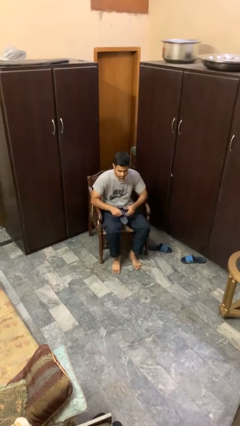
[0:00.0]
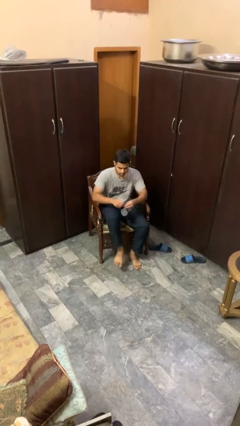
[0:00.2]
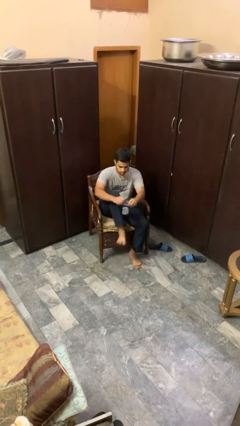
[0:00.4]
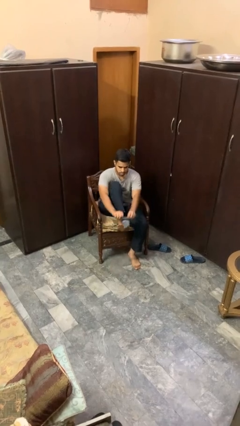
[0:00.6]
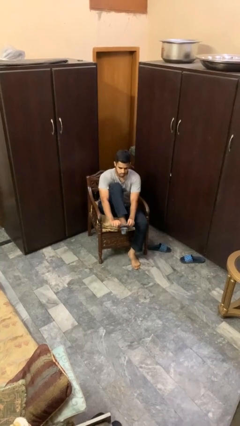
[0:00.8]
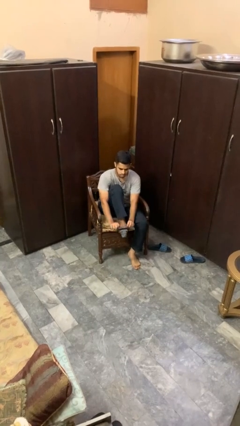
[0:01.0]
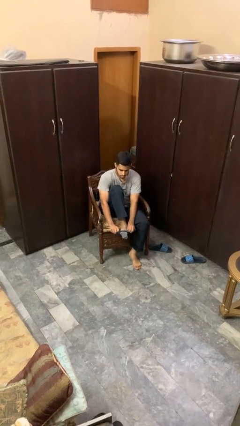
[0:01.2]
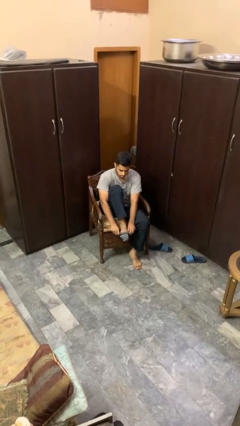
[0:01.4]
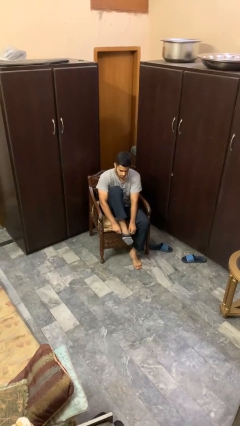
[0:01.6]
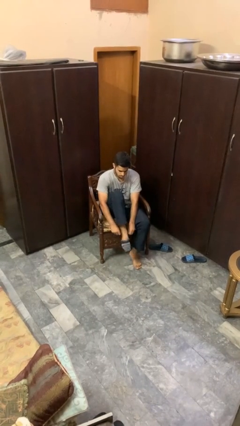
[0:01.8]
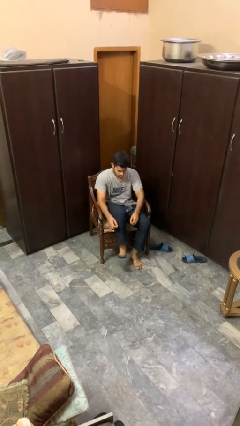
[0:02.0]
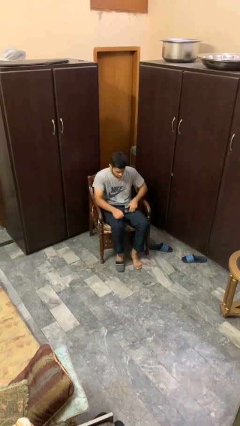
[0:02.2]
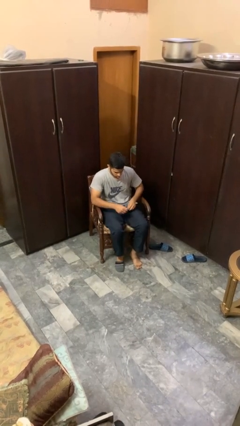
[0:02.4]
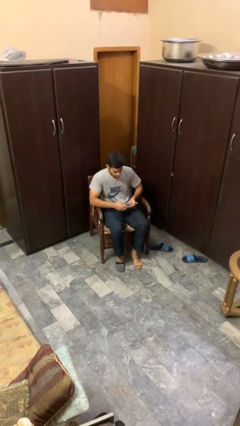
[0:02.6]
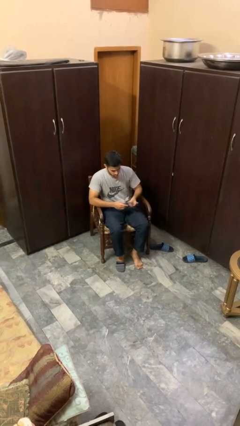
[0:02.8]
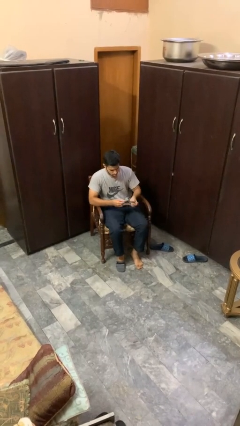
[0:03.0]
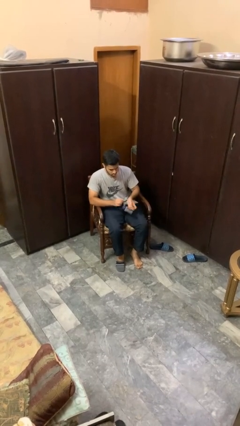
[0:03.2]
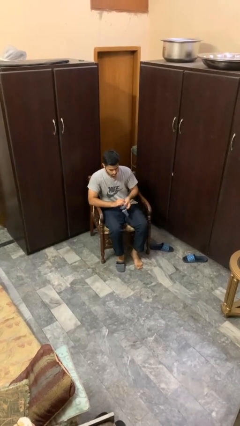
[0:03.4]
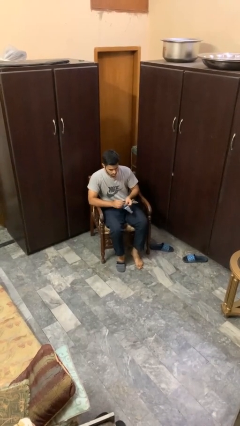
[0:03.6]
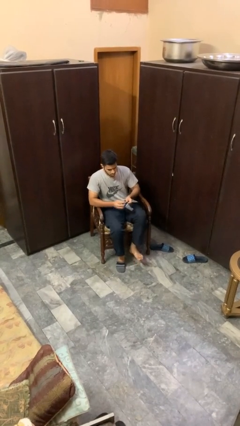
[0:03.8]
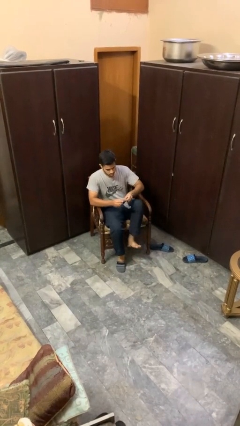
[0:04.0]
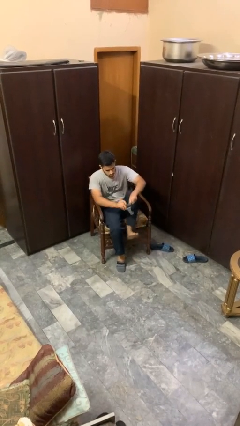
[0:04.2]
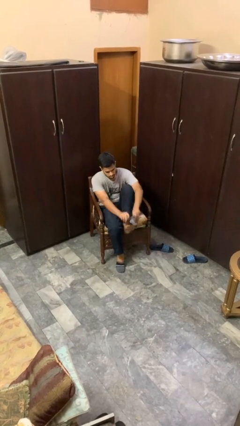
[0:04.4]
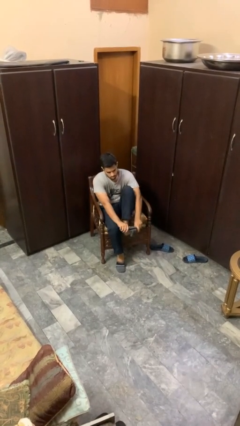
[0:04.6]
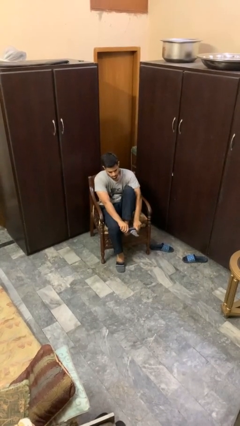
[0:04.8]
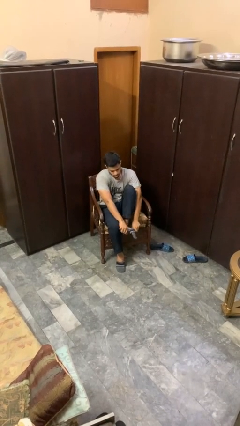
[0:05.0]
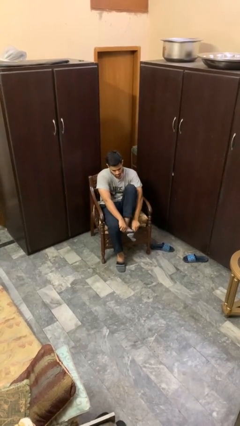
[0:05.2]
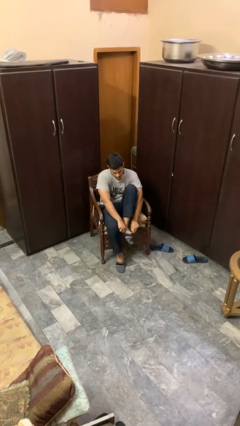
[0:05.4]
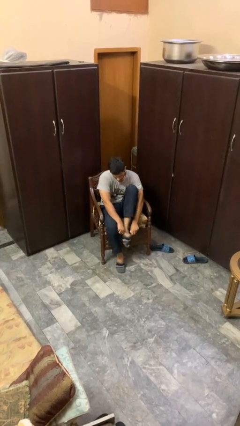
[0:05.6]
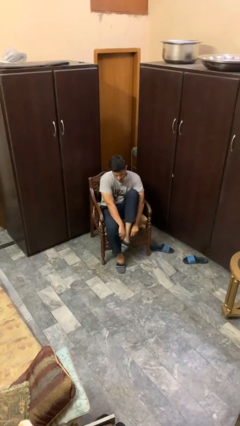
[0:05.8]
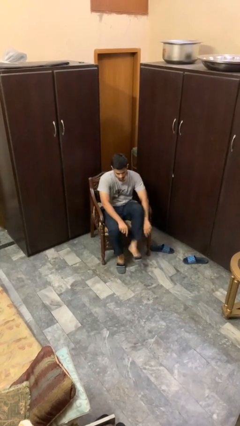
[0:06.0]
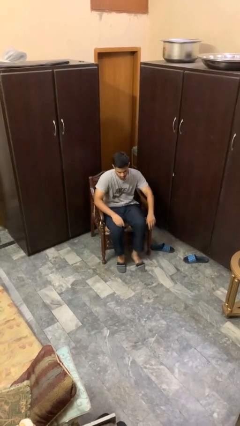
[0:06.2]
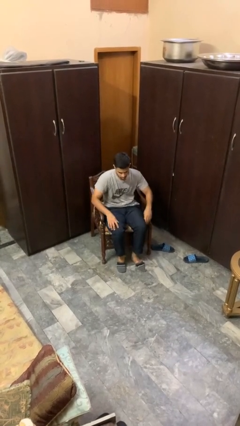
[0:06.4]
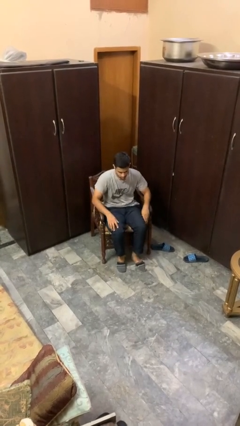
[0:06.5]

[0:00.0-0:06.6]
person puts on socks

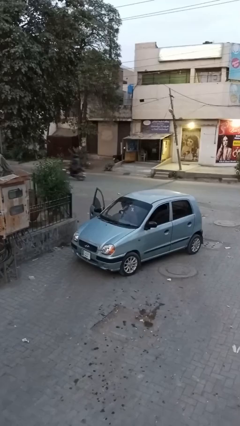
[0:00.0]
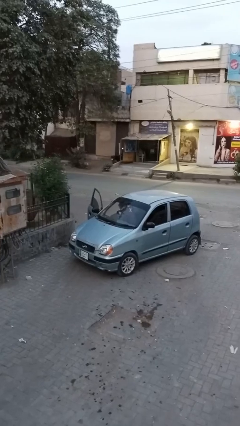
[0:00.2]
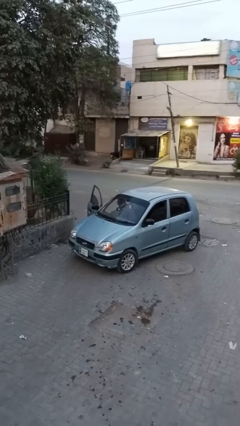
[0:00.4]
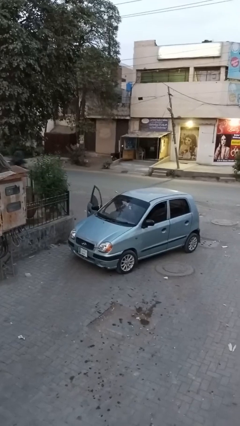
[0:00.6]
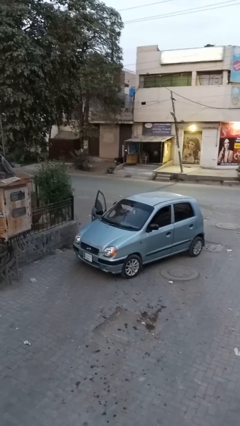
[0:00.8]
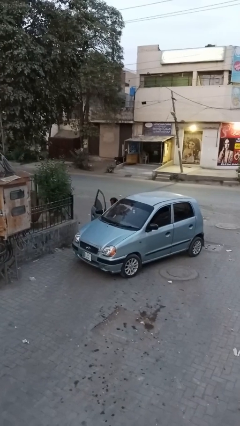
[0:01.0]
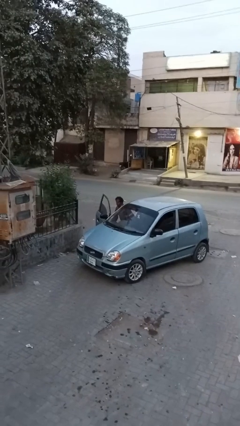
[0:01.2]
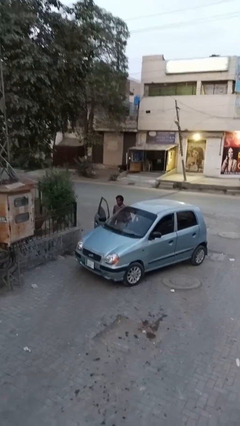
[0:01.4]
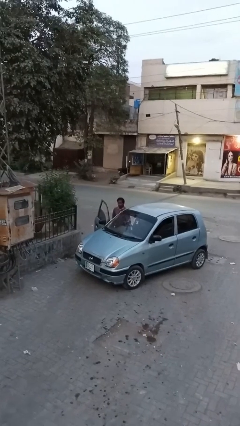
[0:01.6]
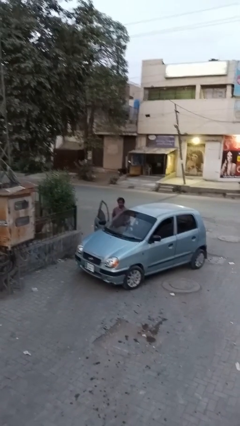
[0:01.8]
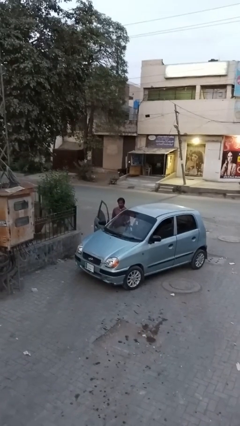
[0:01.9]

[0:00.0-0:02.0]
person exits car

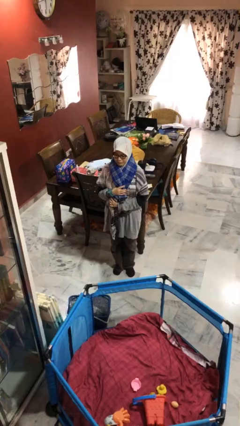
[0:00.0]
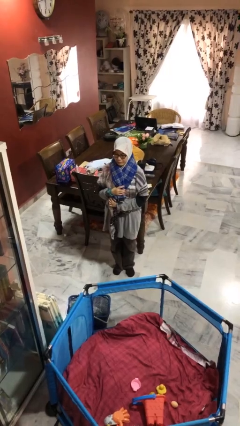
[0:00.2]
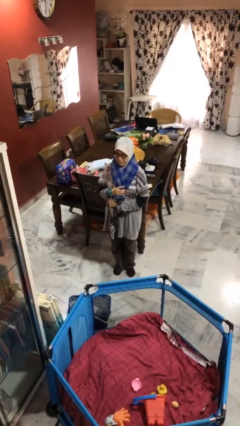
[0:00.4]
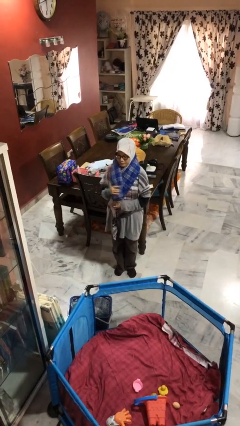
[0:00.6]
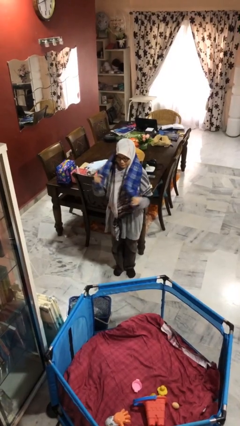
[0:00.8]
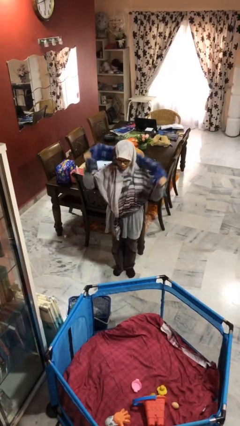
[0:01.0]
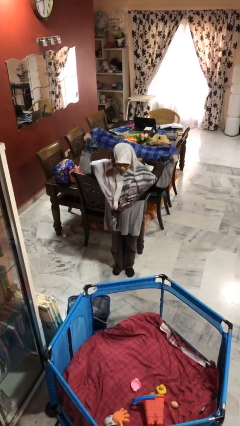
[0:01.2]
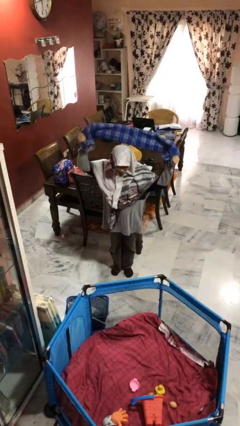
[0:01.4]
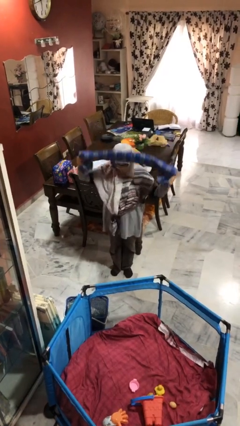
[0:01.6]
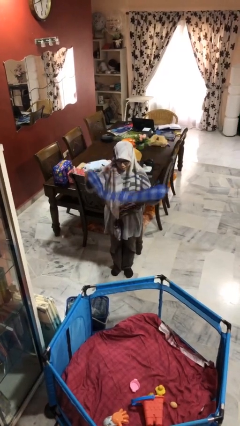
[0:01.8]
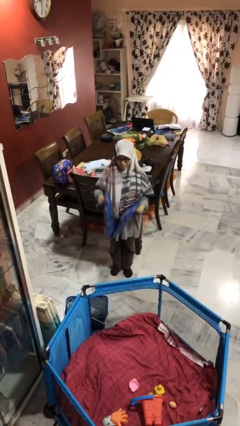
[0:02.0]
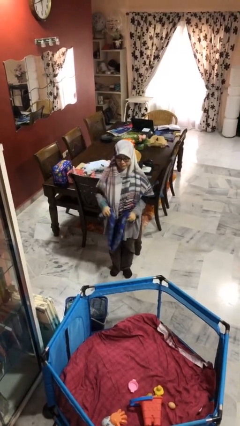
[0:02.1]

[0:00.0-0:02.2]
person takes off scarf

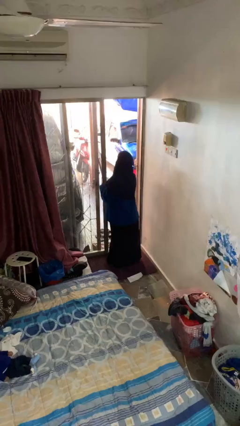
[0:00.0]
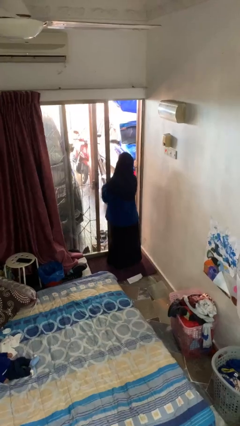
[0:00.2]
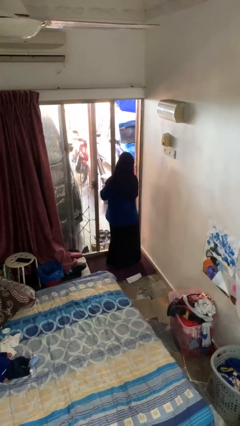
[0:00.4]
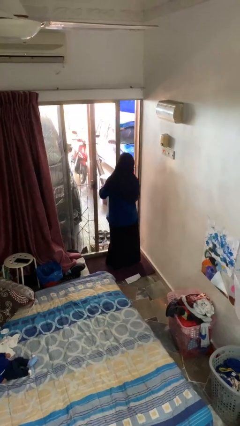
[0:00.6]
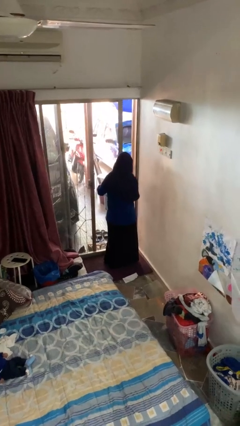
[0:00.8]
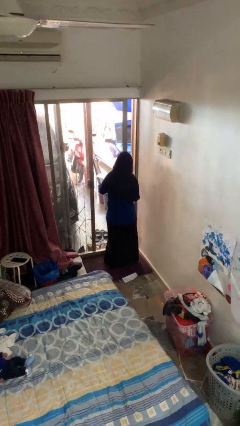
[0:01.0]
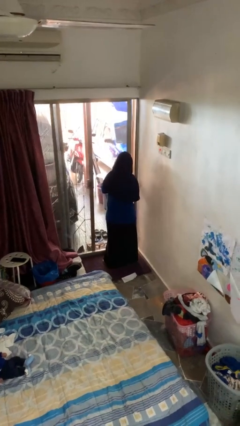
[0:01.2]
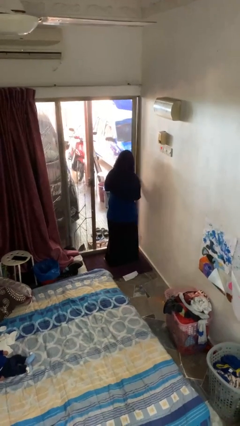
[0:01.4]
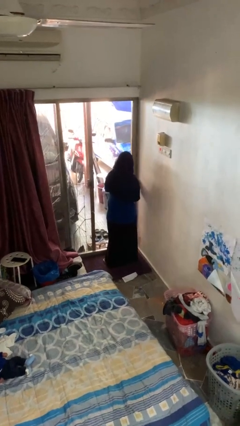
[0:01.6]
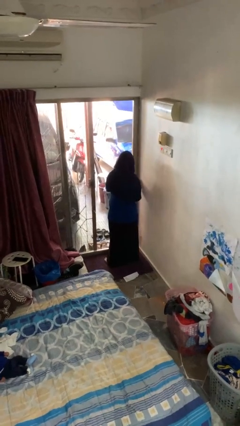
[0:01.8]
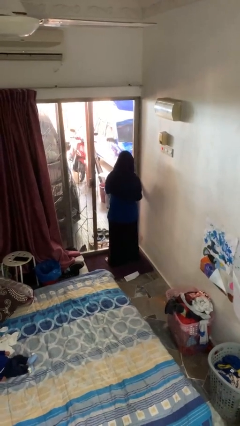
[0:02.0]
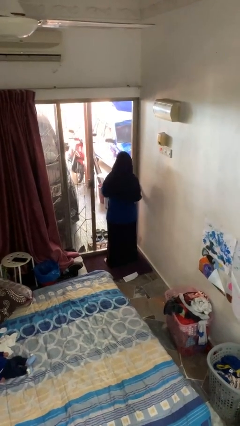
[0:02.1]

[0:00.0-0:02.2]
person closes sliding door

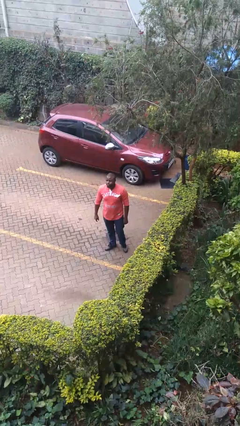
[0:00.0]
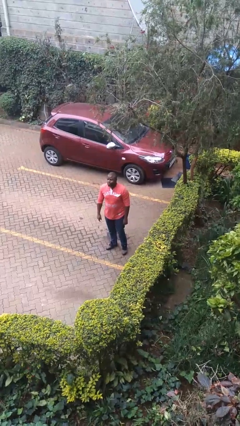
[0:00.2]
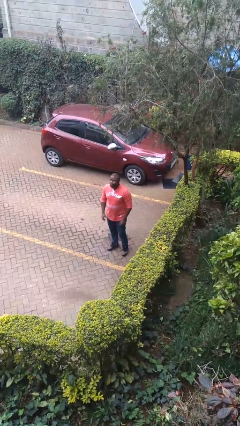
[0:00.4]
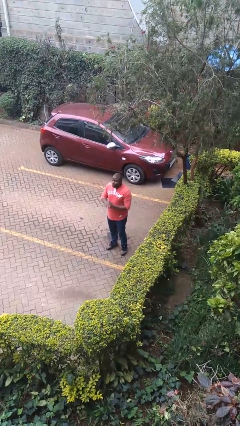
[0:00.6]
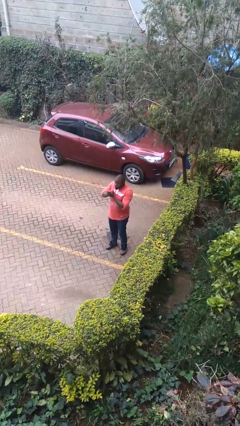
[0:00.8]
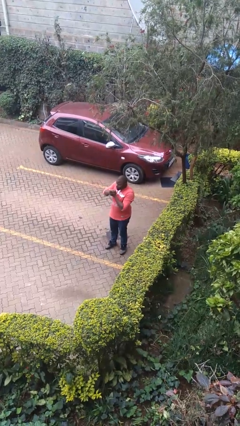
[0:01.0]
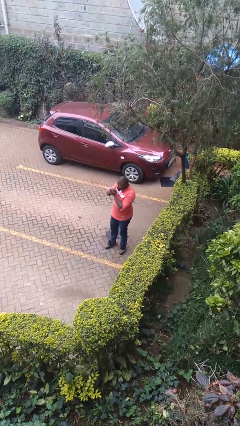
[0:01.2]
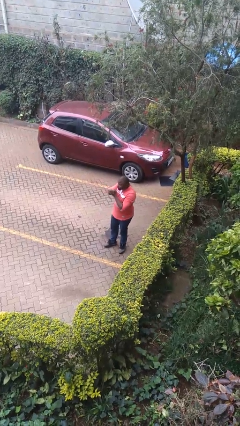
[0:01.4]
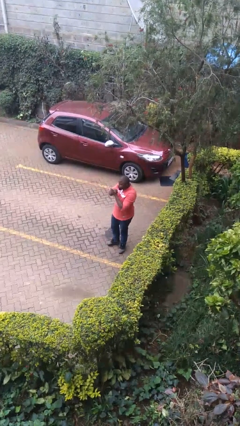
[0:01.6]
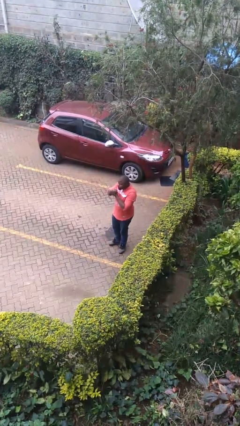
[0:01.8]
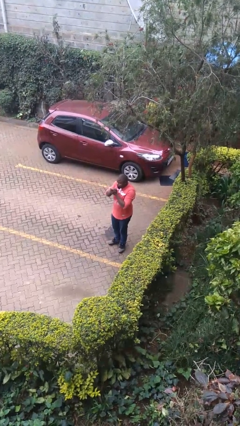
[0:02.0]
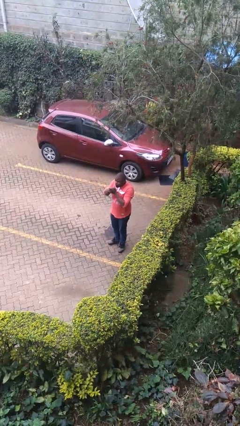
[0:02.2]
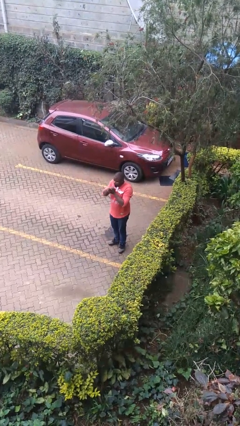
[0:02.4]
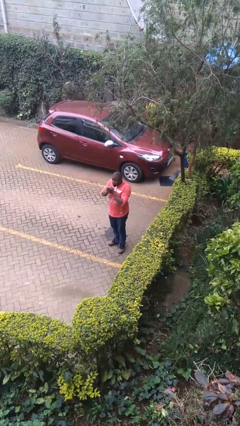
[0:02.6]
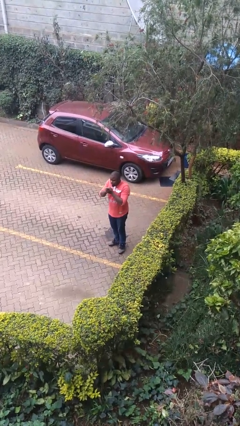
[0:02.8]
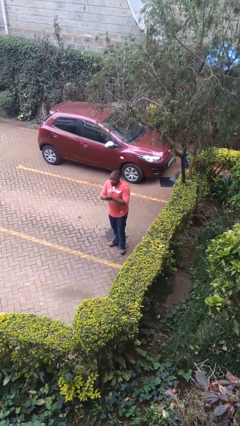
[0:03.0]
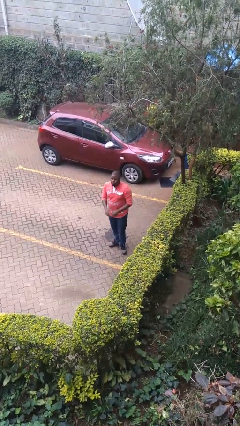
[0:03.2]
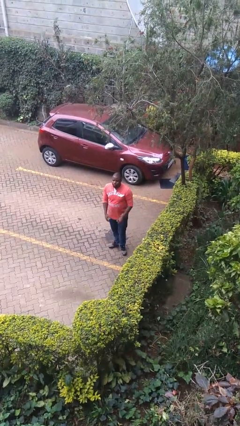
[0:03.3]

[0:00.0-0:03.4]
person blows into hands

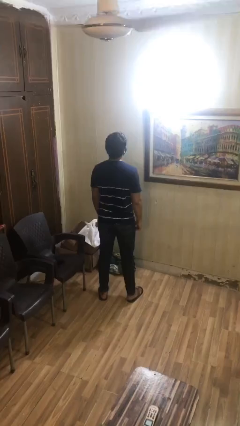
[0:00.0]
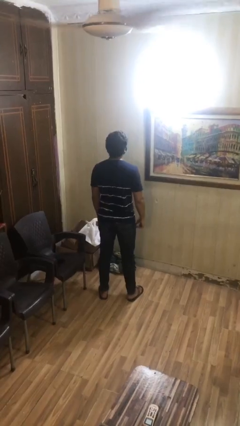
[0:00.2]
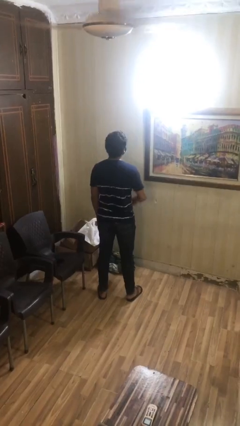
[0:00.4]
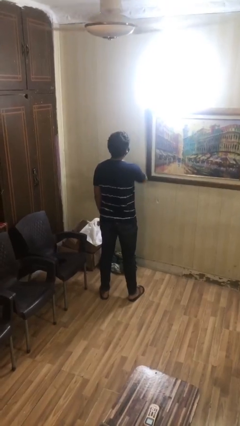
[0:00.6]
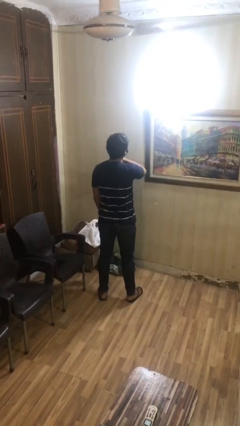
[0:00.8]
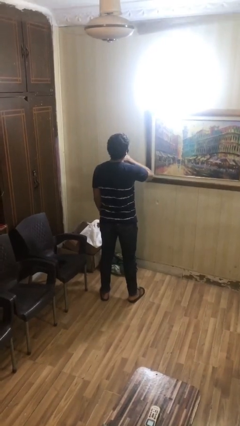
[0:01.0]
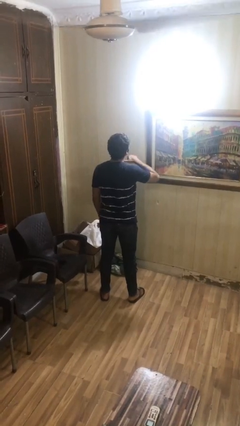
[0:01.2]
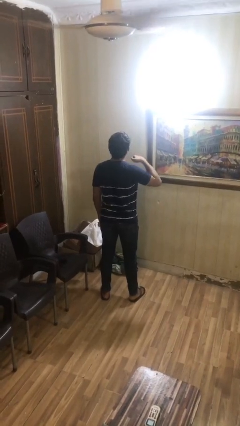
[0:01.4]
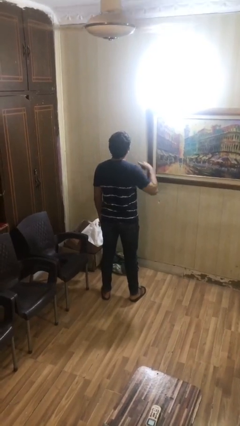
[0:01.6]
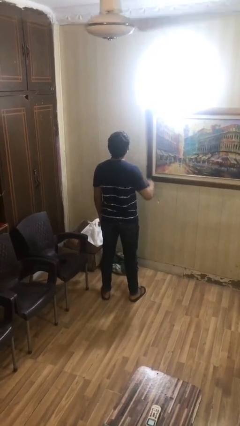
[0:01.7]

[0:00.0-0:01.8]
person gestures cut
